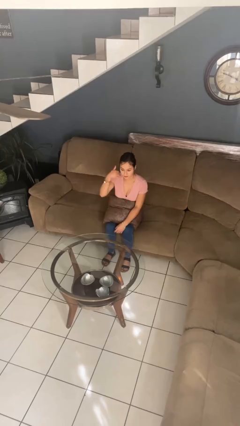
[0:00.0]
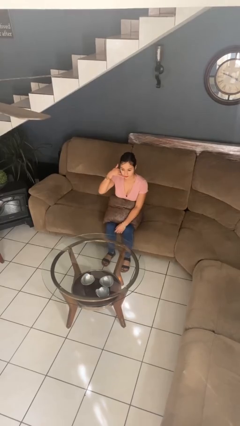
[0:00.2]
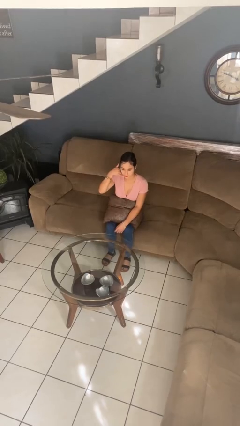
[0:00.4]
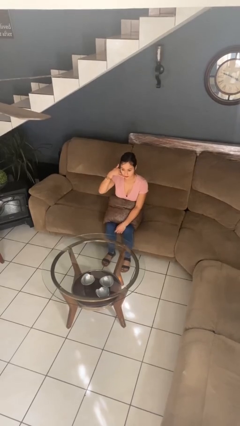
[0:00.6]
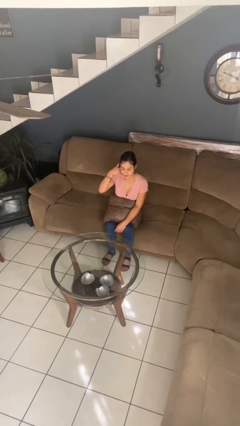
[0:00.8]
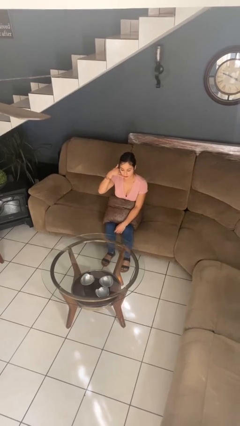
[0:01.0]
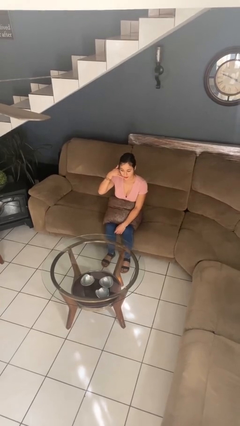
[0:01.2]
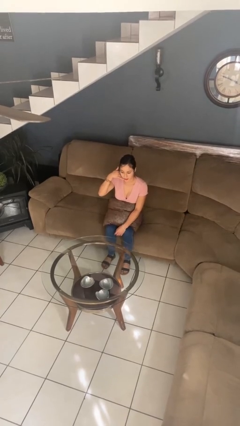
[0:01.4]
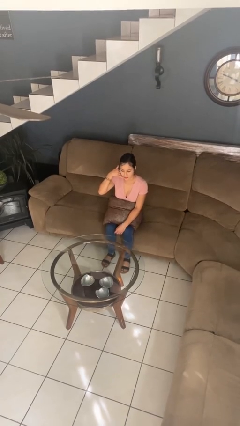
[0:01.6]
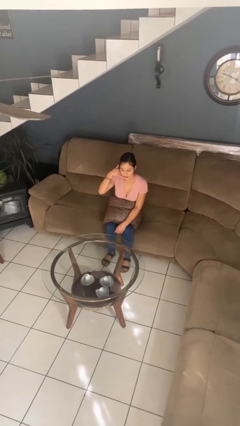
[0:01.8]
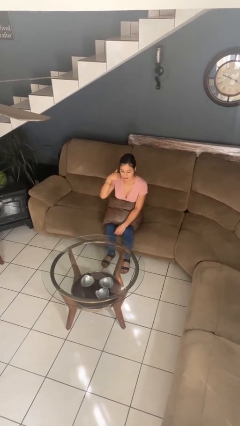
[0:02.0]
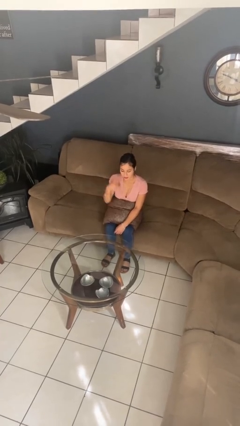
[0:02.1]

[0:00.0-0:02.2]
person gestures call me

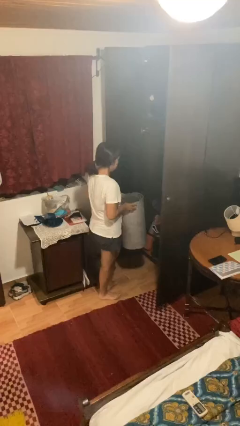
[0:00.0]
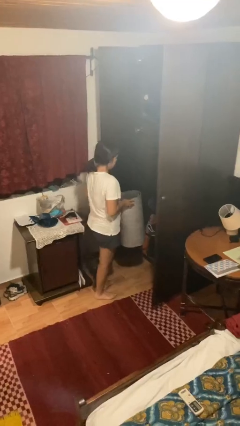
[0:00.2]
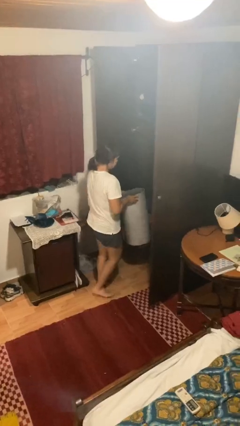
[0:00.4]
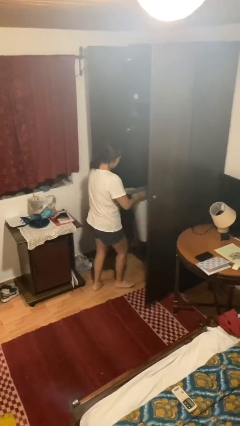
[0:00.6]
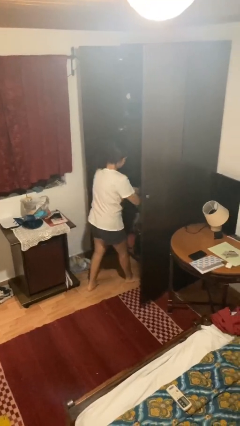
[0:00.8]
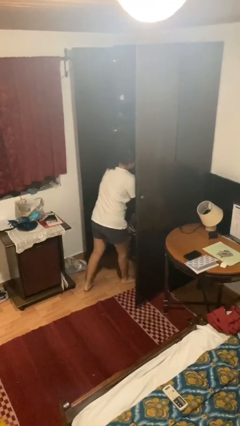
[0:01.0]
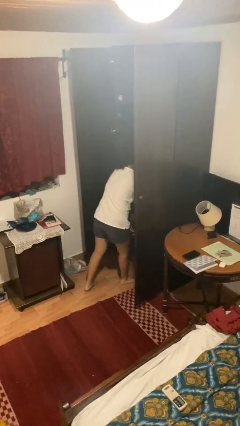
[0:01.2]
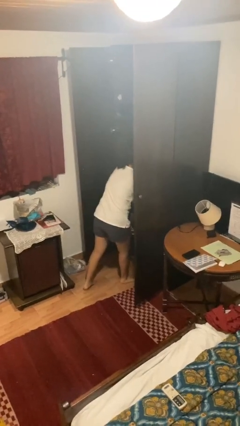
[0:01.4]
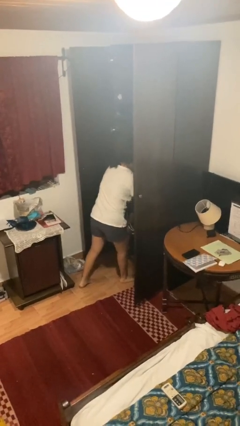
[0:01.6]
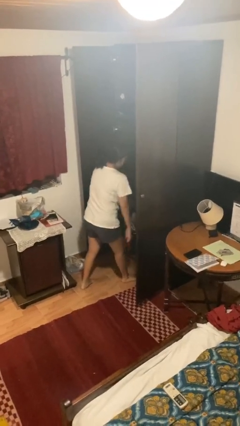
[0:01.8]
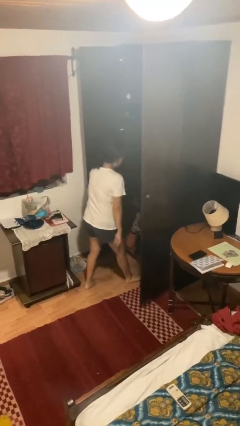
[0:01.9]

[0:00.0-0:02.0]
person puts down object into cabinet

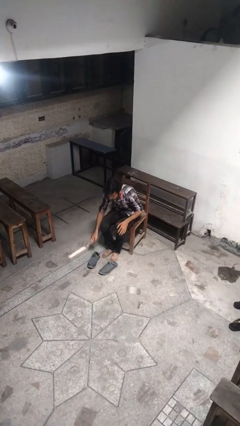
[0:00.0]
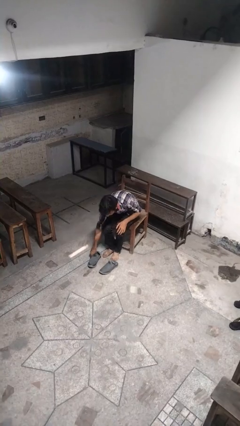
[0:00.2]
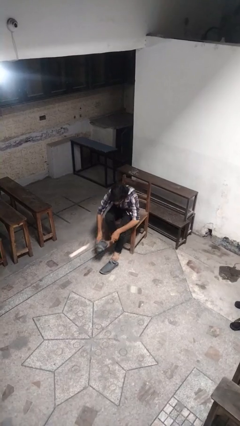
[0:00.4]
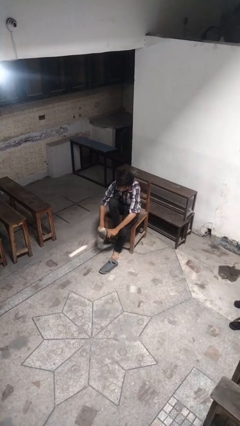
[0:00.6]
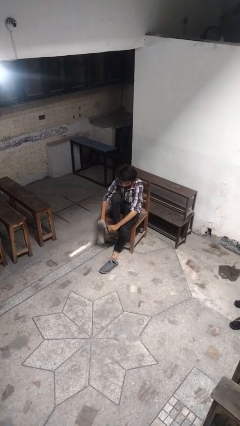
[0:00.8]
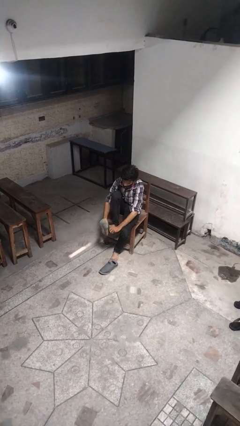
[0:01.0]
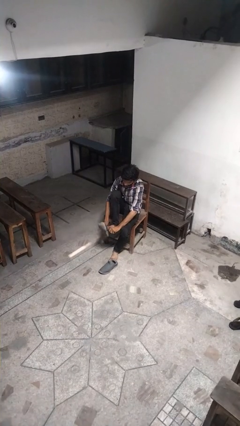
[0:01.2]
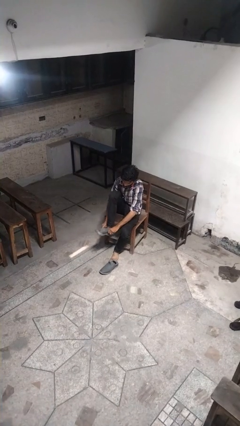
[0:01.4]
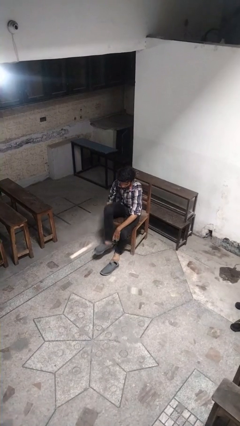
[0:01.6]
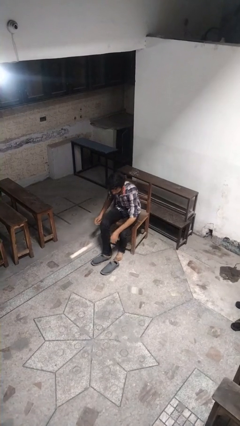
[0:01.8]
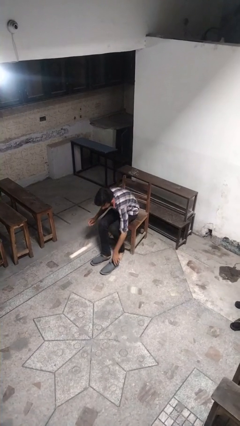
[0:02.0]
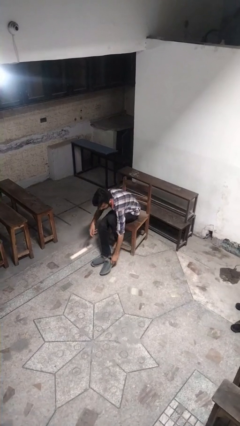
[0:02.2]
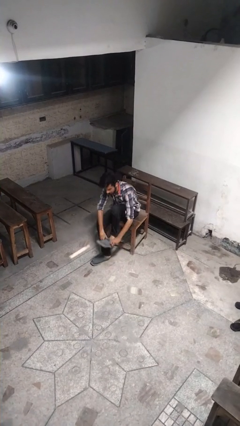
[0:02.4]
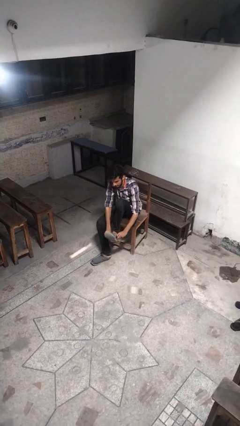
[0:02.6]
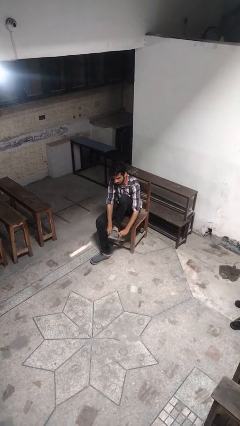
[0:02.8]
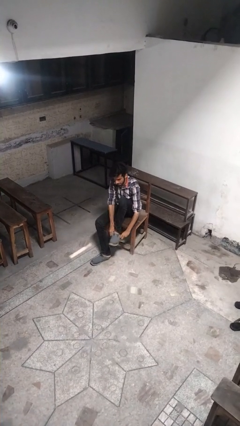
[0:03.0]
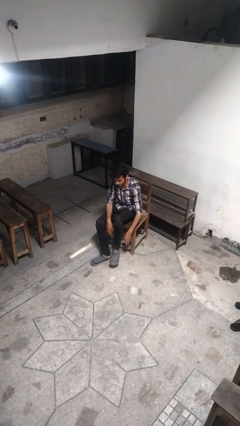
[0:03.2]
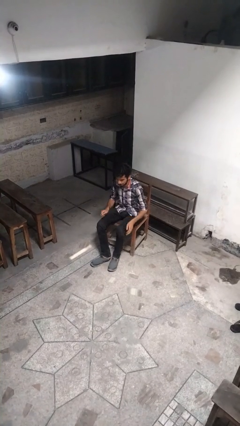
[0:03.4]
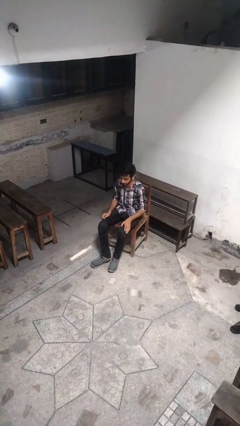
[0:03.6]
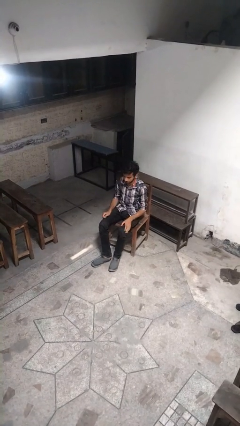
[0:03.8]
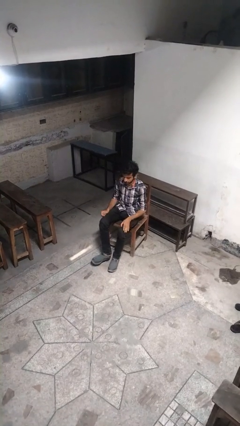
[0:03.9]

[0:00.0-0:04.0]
person puts on shoes

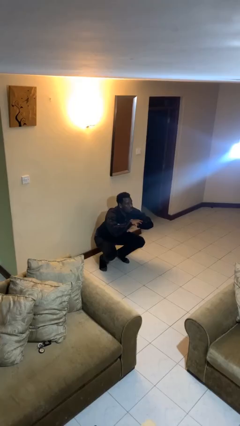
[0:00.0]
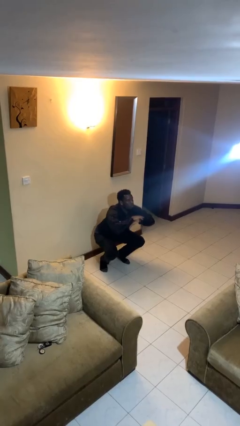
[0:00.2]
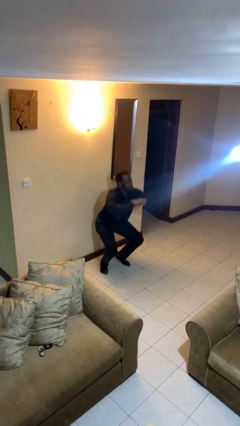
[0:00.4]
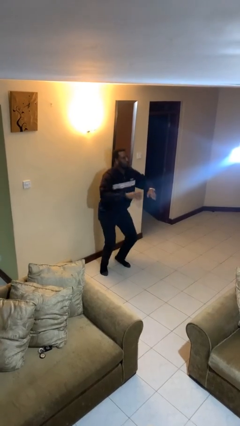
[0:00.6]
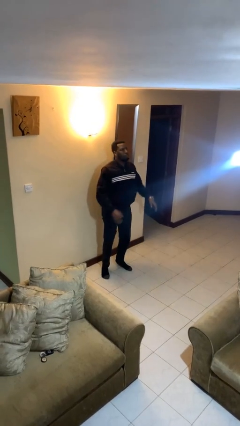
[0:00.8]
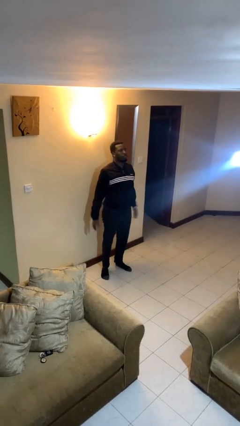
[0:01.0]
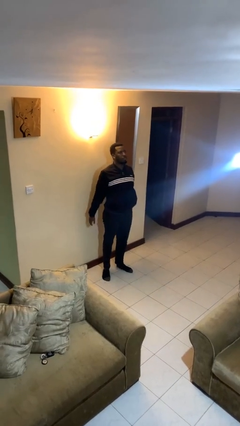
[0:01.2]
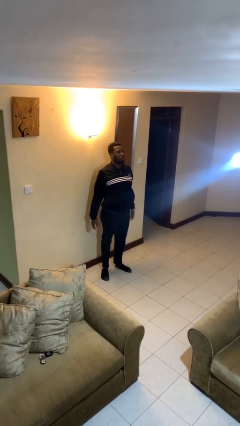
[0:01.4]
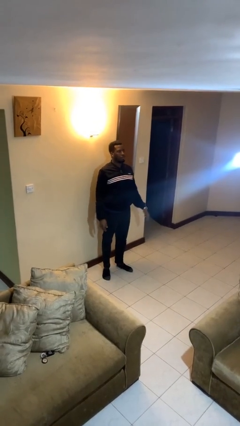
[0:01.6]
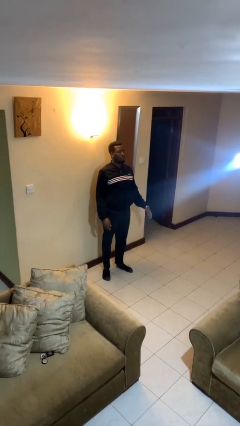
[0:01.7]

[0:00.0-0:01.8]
person stands up

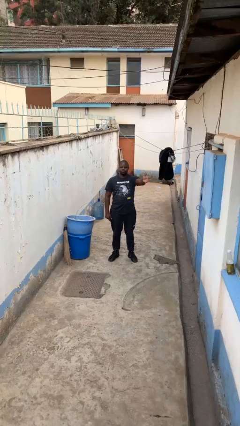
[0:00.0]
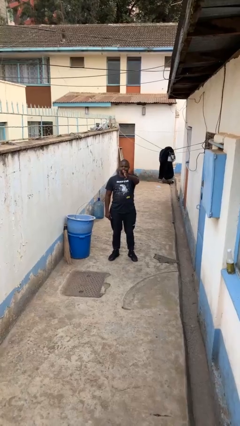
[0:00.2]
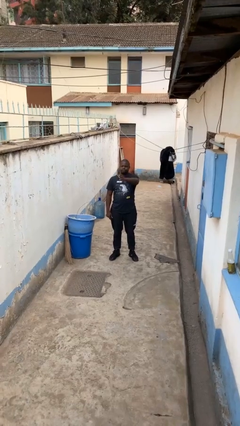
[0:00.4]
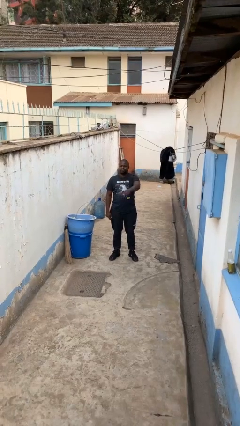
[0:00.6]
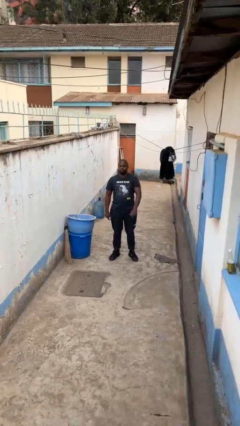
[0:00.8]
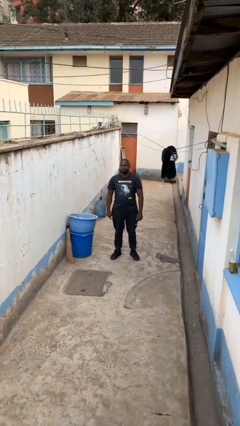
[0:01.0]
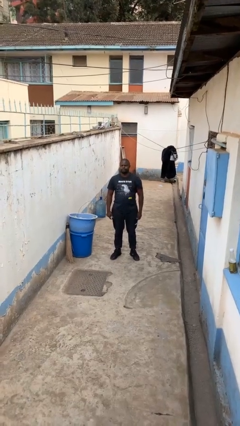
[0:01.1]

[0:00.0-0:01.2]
person gestures swipe right

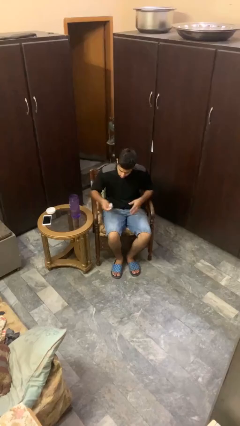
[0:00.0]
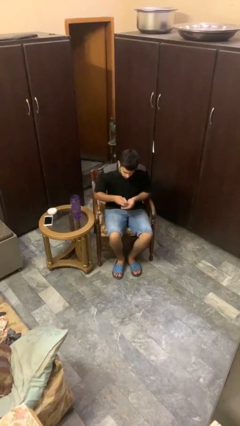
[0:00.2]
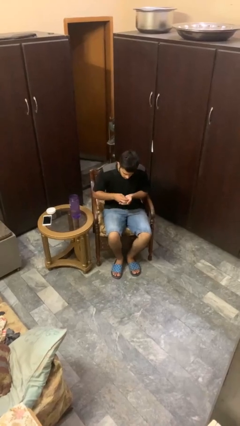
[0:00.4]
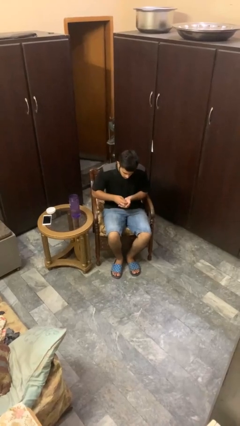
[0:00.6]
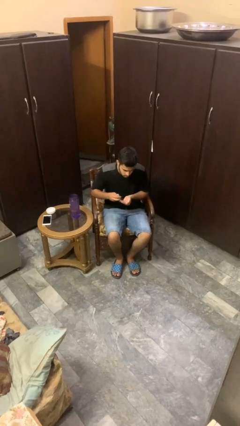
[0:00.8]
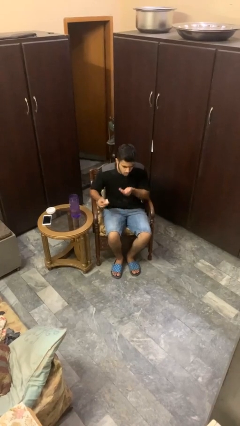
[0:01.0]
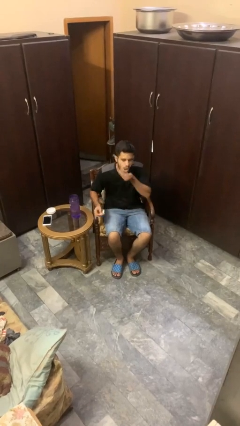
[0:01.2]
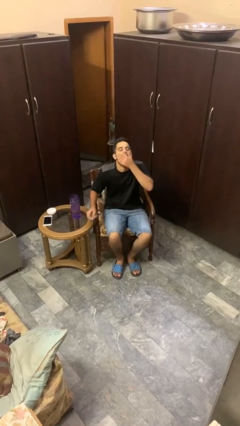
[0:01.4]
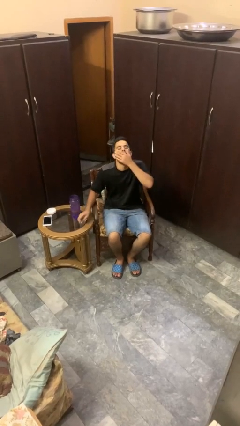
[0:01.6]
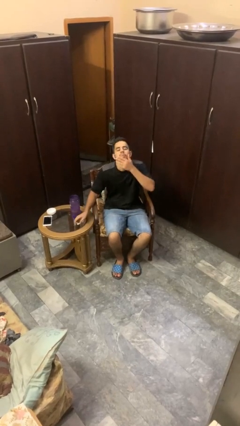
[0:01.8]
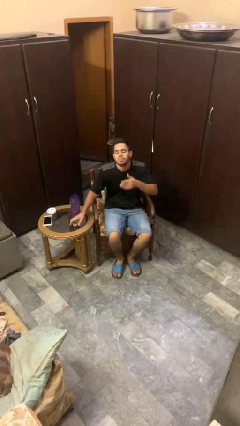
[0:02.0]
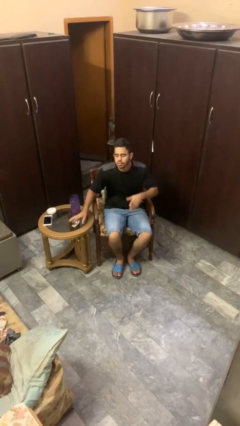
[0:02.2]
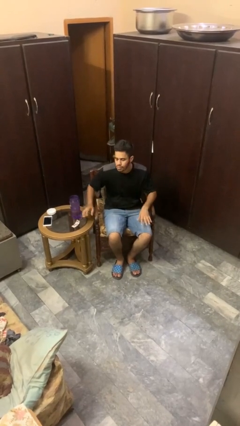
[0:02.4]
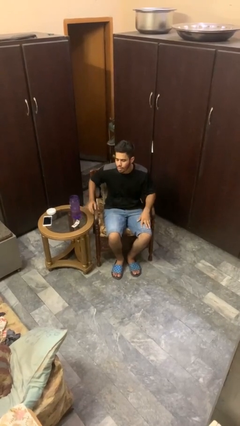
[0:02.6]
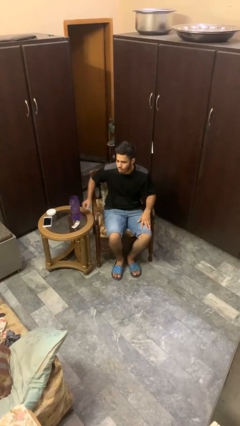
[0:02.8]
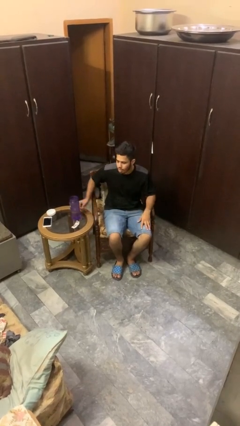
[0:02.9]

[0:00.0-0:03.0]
person takes medicine pills

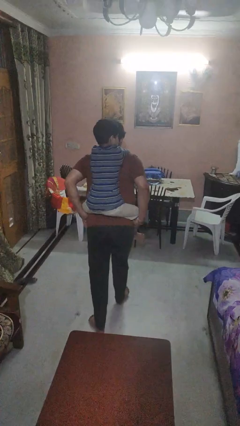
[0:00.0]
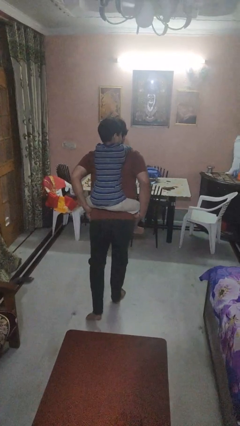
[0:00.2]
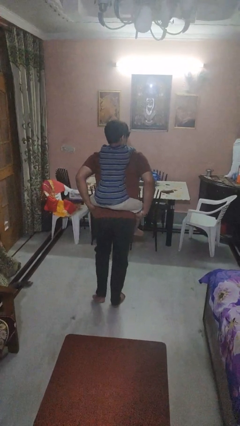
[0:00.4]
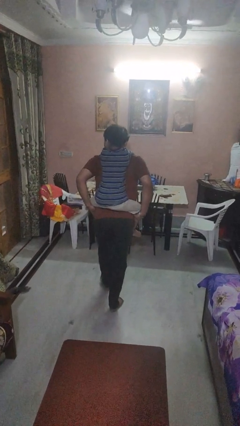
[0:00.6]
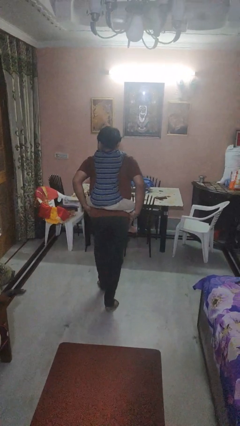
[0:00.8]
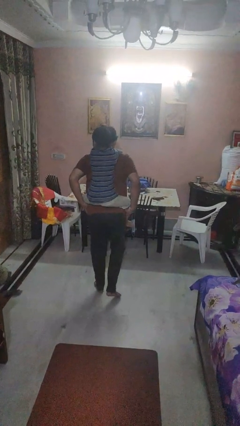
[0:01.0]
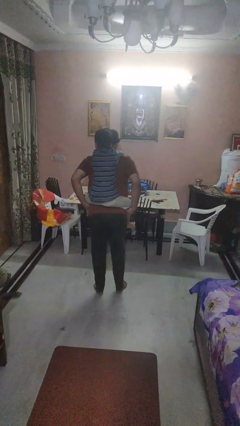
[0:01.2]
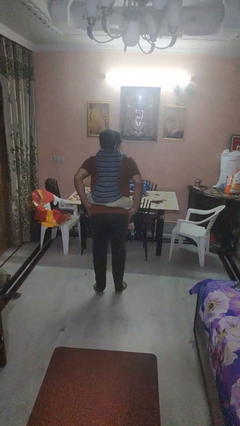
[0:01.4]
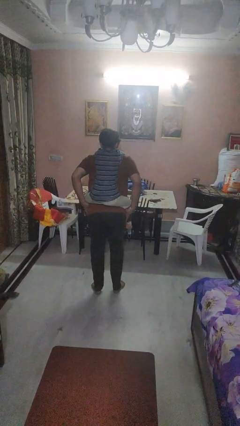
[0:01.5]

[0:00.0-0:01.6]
person carries person on back

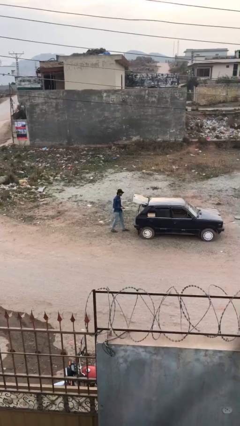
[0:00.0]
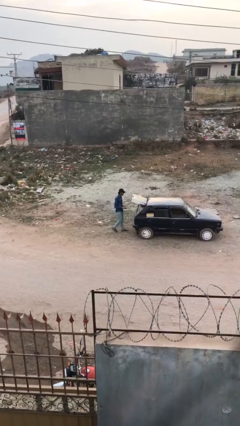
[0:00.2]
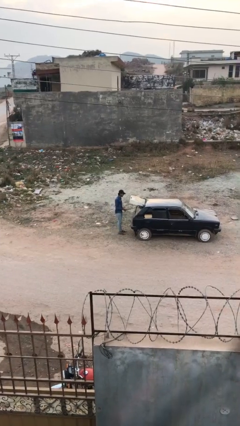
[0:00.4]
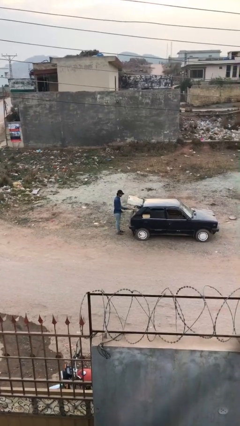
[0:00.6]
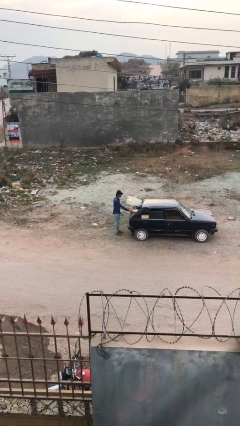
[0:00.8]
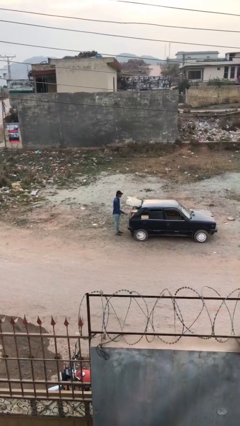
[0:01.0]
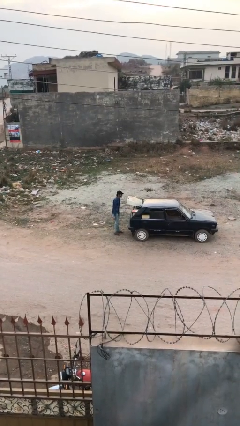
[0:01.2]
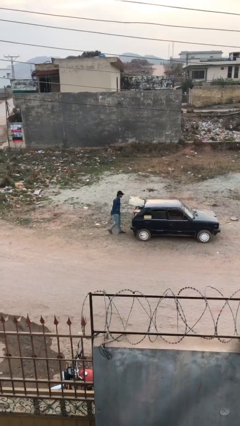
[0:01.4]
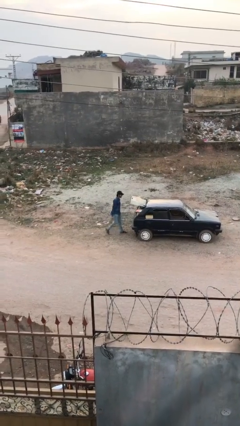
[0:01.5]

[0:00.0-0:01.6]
person loads car
